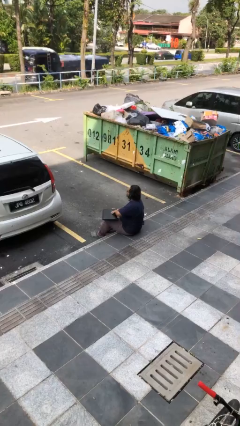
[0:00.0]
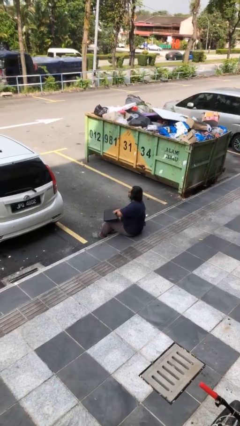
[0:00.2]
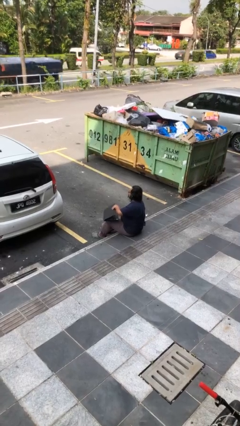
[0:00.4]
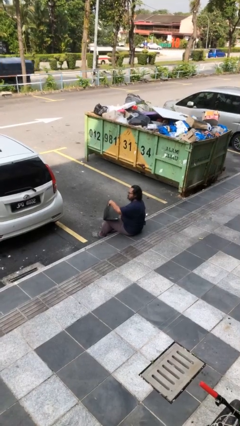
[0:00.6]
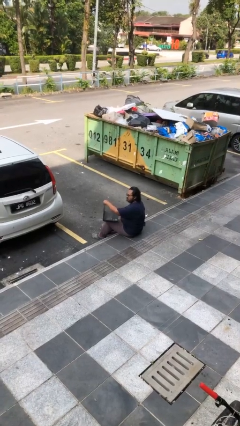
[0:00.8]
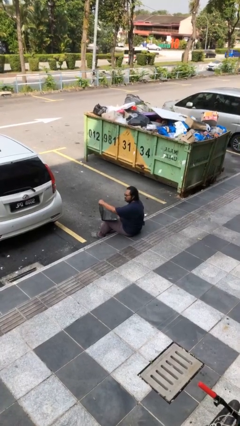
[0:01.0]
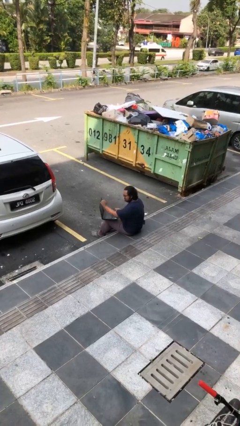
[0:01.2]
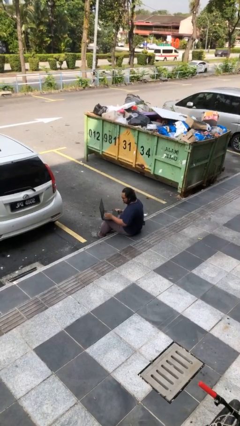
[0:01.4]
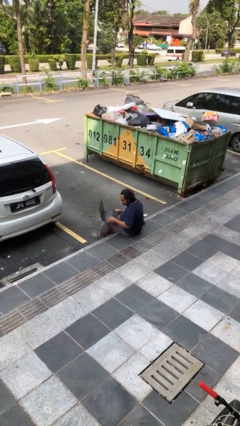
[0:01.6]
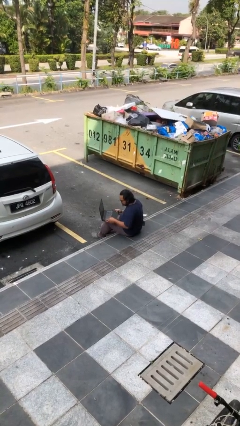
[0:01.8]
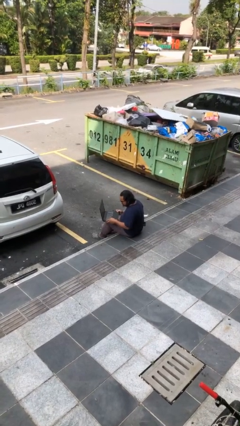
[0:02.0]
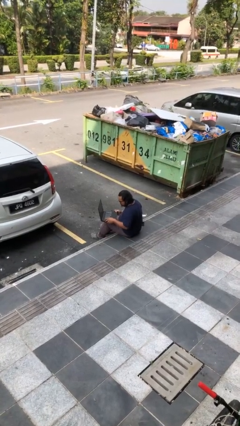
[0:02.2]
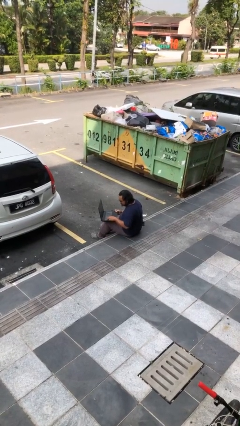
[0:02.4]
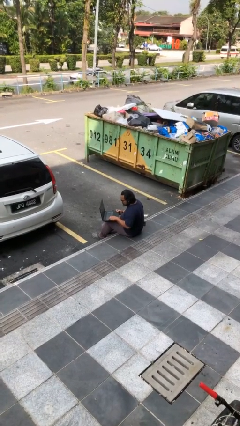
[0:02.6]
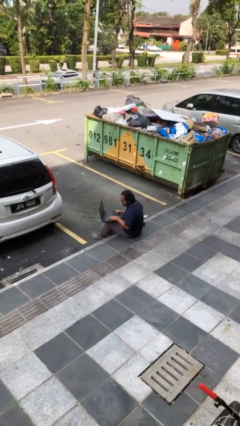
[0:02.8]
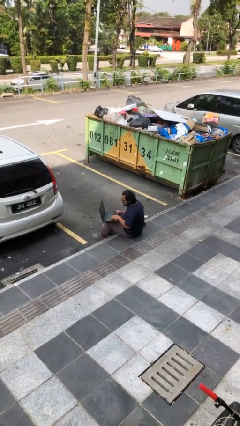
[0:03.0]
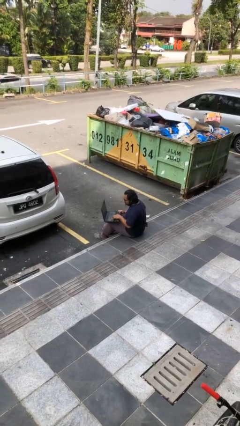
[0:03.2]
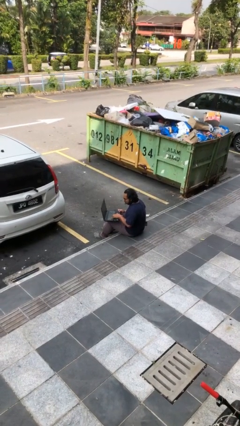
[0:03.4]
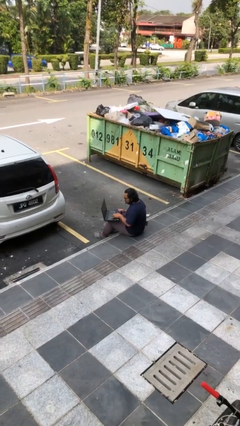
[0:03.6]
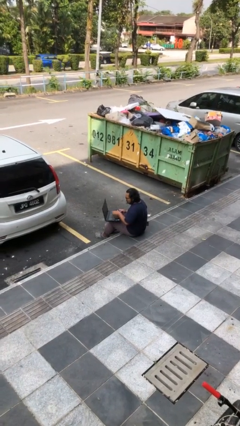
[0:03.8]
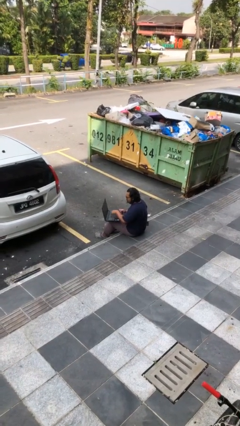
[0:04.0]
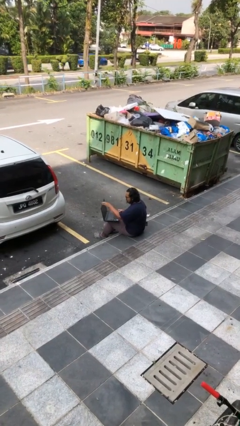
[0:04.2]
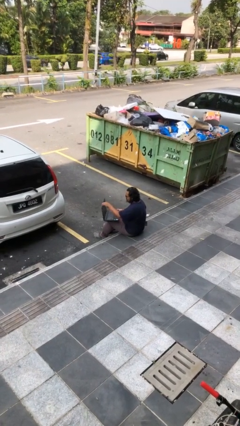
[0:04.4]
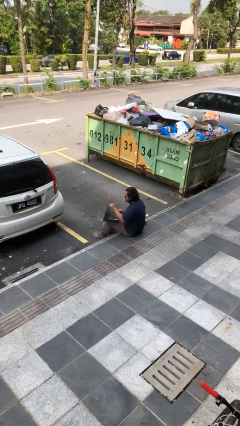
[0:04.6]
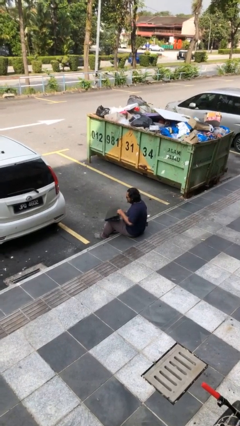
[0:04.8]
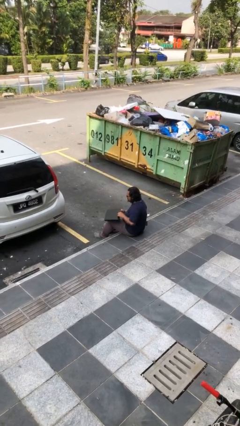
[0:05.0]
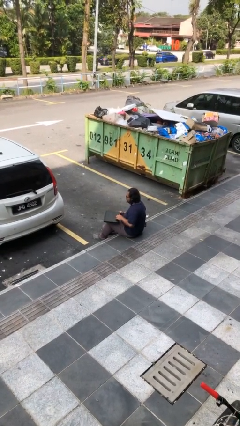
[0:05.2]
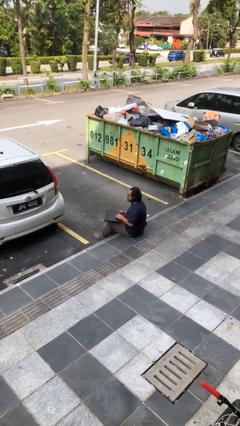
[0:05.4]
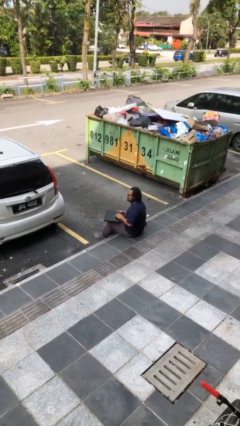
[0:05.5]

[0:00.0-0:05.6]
person interacts with laptop

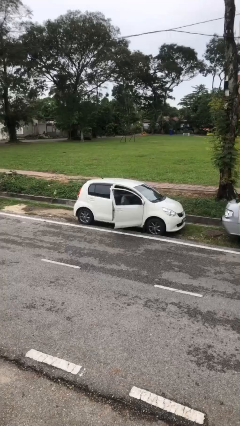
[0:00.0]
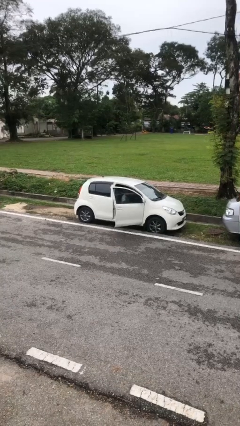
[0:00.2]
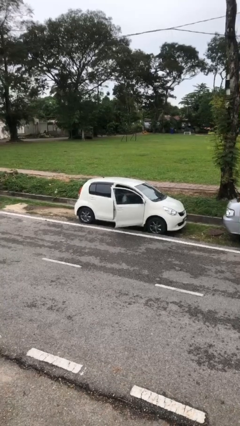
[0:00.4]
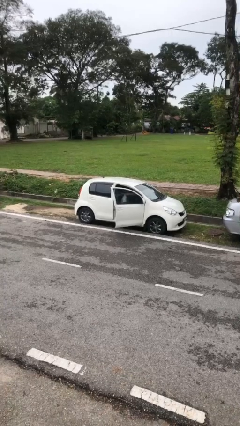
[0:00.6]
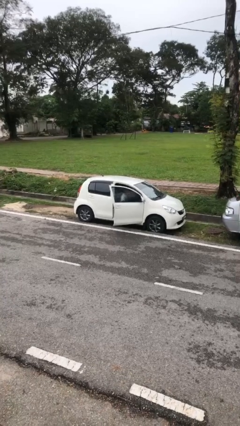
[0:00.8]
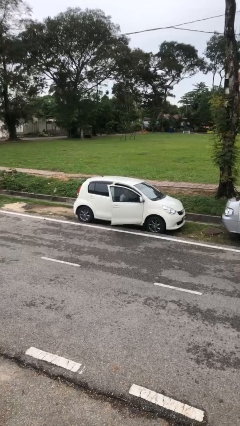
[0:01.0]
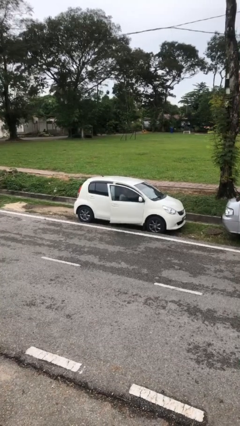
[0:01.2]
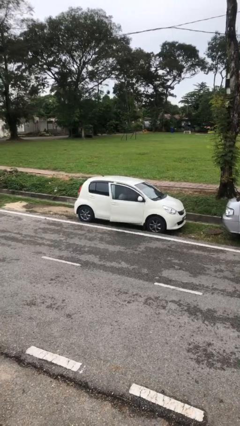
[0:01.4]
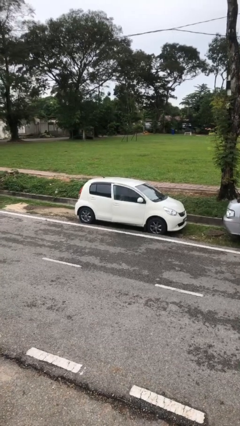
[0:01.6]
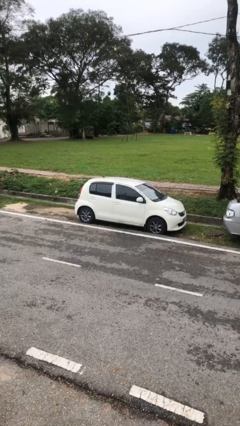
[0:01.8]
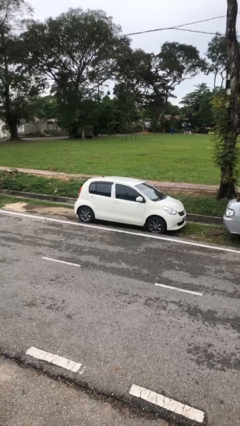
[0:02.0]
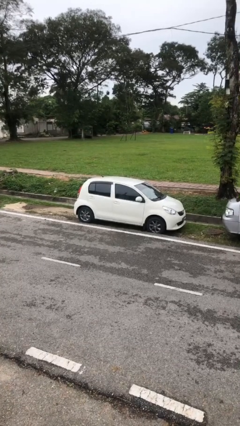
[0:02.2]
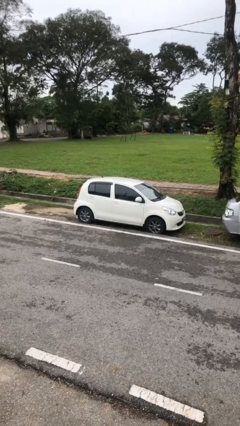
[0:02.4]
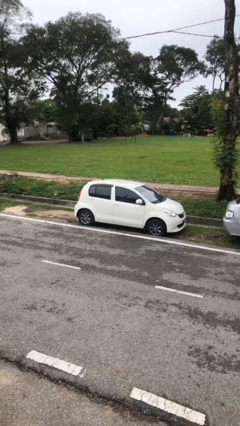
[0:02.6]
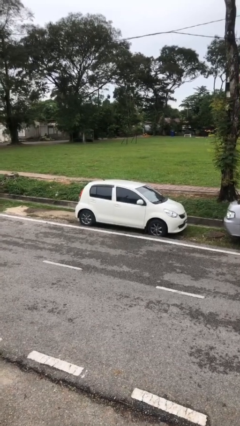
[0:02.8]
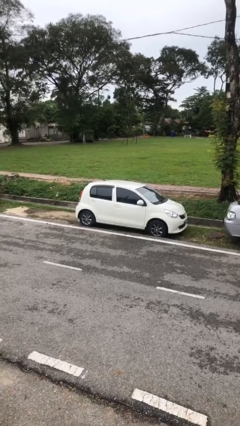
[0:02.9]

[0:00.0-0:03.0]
person closes car door

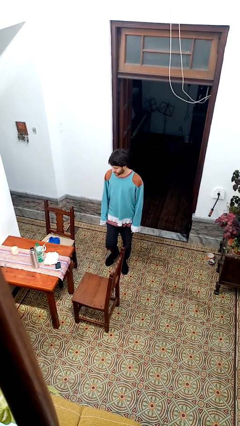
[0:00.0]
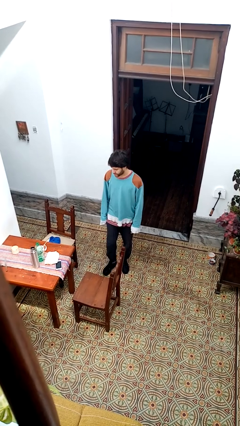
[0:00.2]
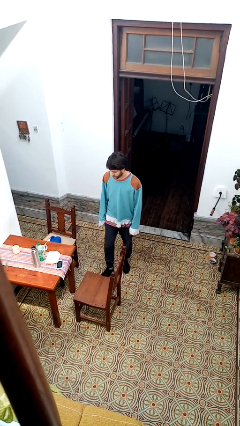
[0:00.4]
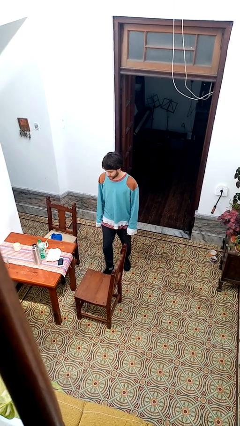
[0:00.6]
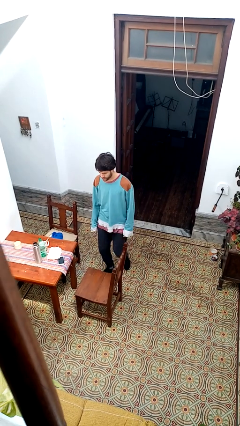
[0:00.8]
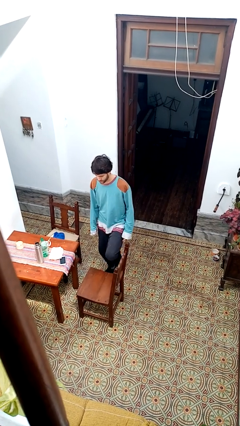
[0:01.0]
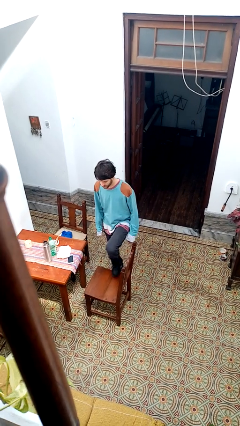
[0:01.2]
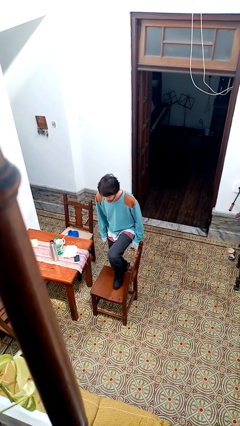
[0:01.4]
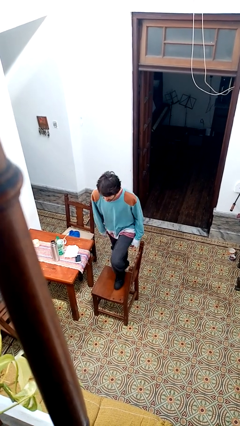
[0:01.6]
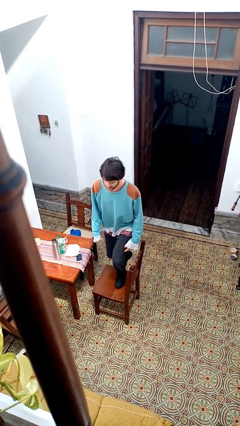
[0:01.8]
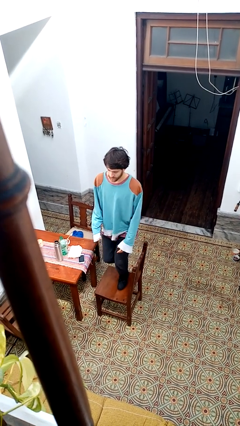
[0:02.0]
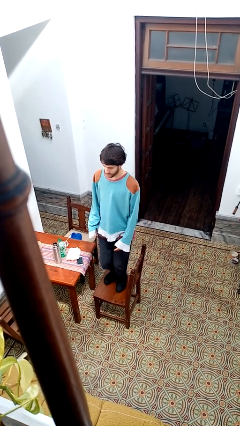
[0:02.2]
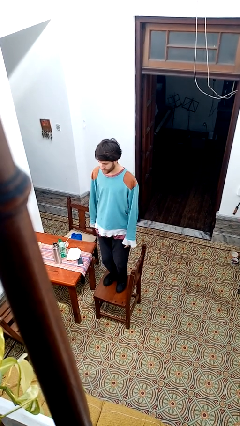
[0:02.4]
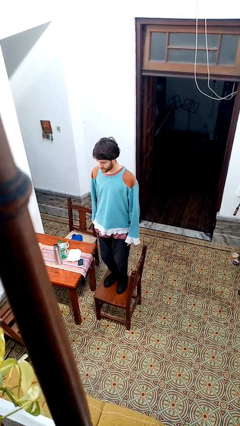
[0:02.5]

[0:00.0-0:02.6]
person climbs on chair

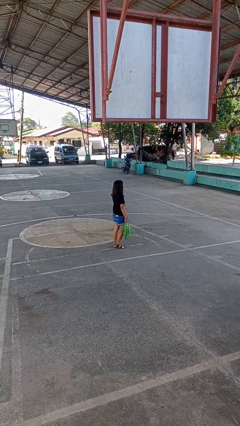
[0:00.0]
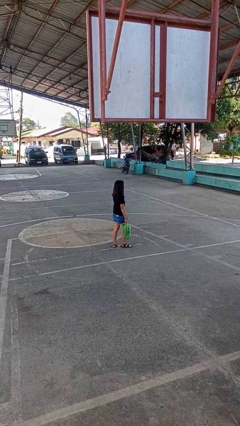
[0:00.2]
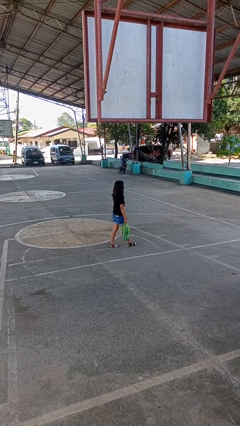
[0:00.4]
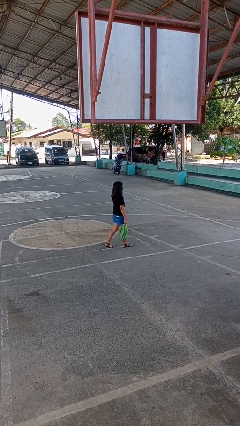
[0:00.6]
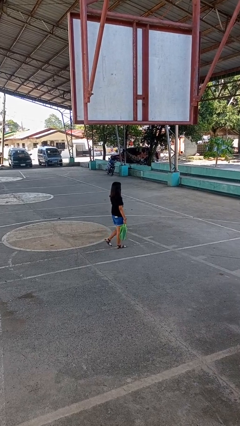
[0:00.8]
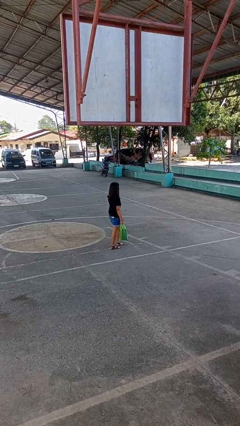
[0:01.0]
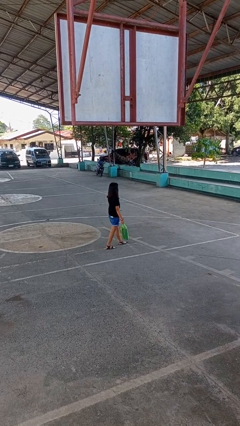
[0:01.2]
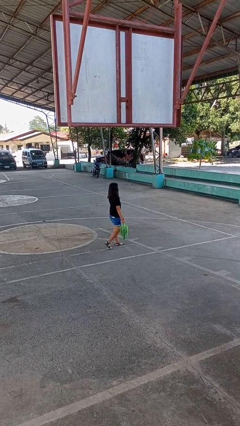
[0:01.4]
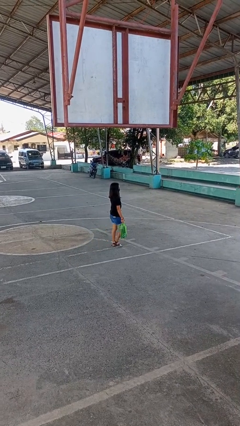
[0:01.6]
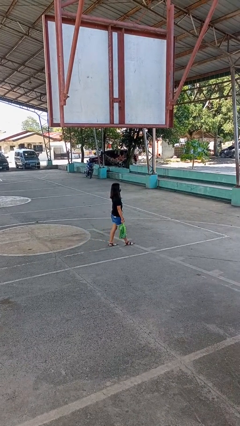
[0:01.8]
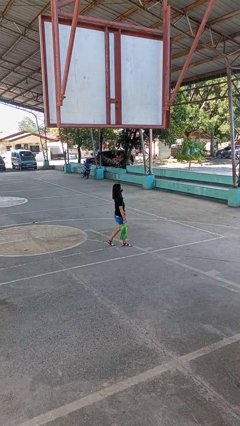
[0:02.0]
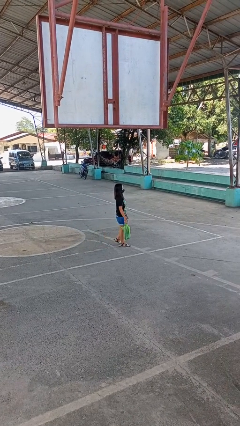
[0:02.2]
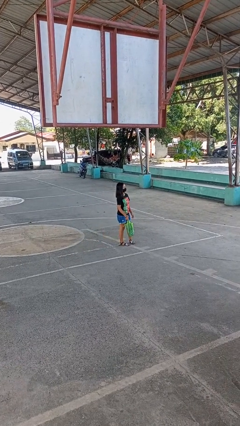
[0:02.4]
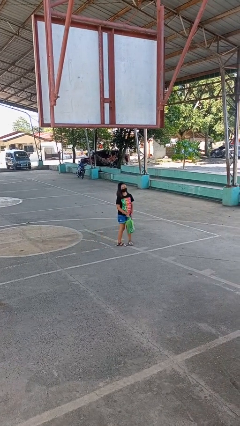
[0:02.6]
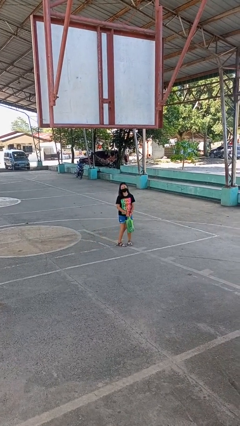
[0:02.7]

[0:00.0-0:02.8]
person carries groceries

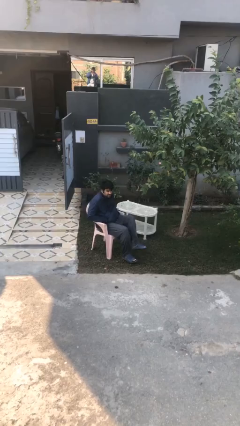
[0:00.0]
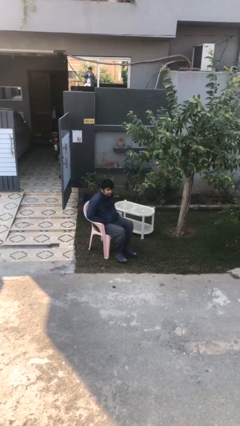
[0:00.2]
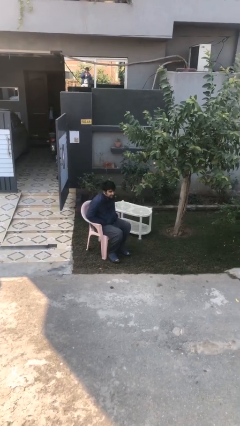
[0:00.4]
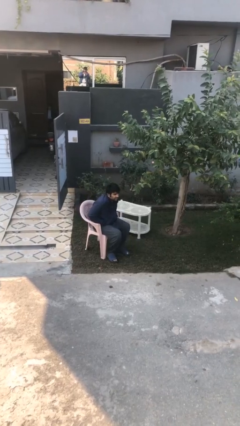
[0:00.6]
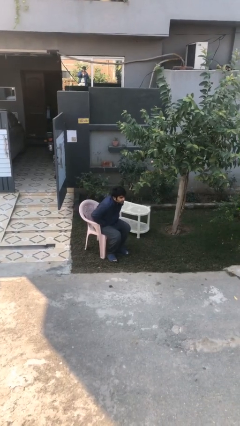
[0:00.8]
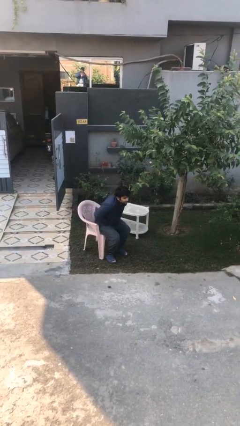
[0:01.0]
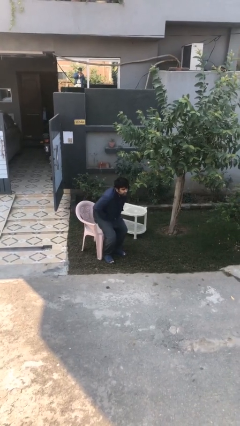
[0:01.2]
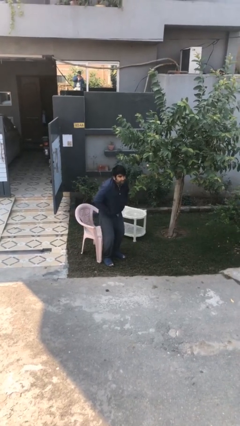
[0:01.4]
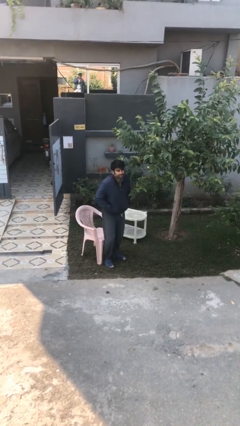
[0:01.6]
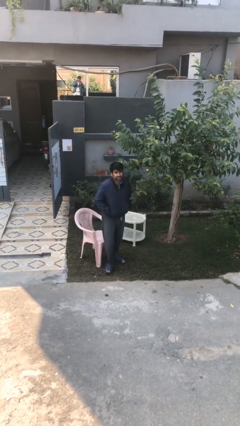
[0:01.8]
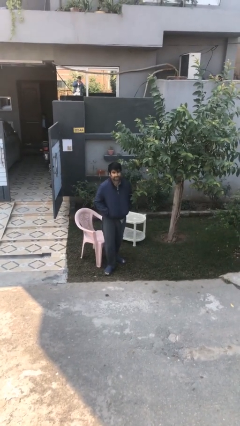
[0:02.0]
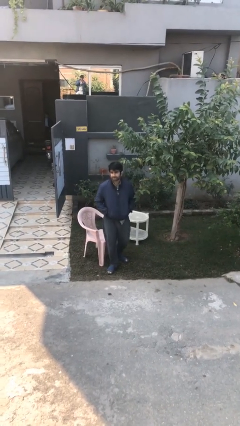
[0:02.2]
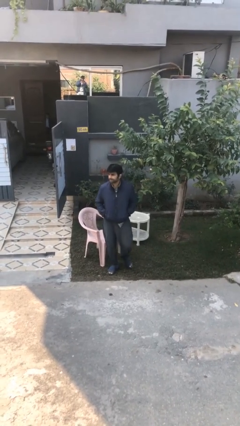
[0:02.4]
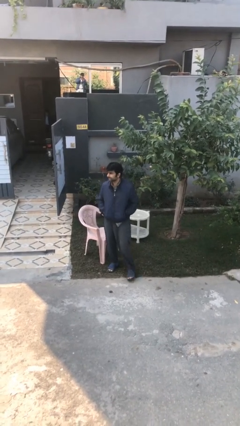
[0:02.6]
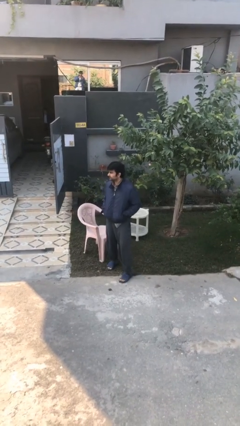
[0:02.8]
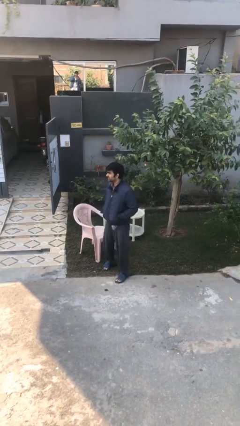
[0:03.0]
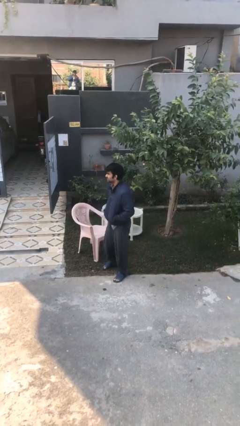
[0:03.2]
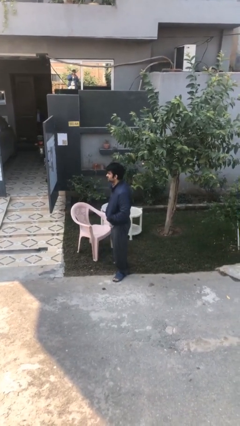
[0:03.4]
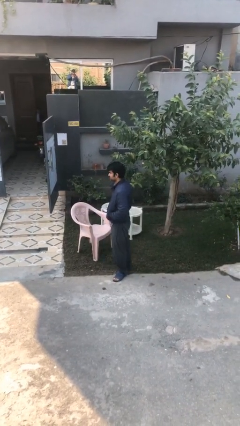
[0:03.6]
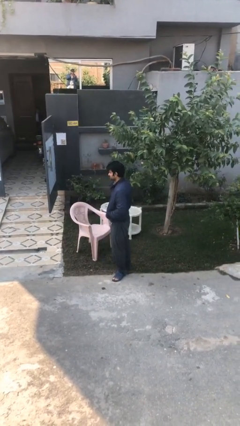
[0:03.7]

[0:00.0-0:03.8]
person stands up
